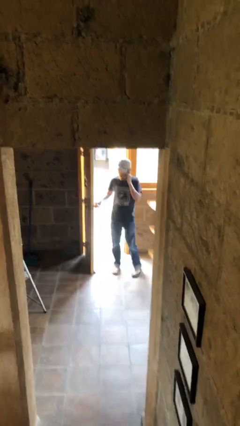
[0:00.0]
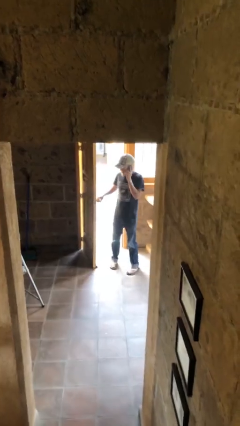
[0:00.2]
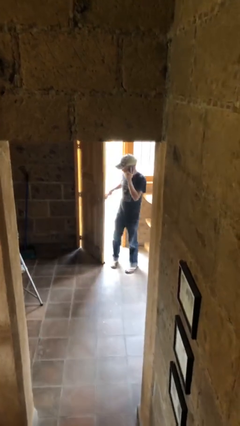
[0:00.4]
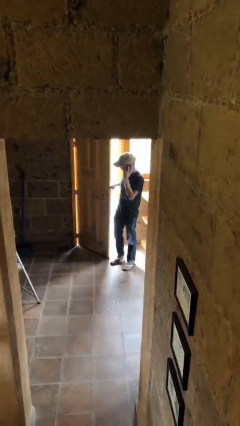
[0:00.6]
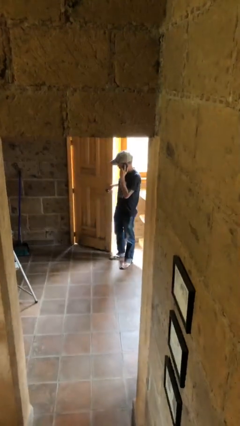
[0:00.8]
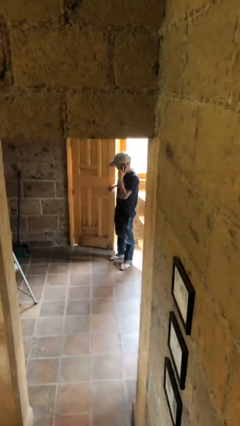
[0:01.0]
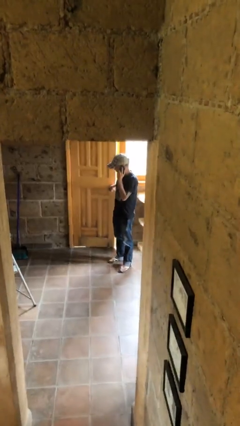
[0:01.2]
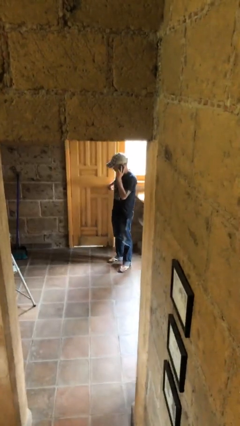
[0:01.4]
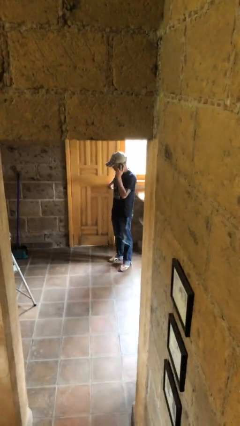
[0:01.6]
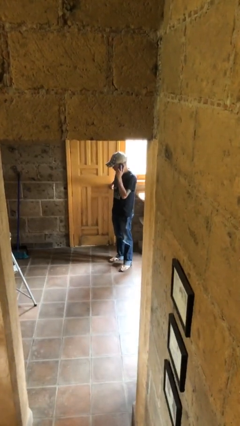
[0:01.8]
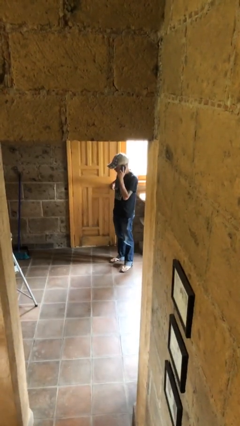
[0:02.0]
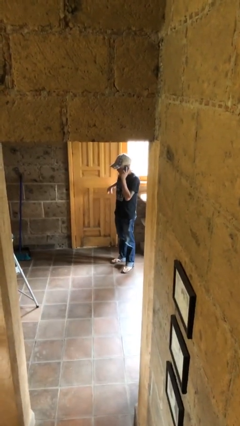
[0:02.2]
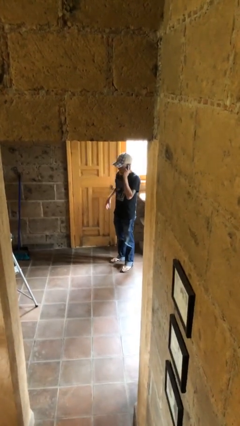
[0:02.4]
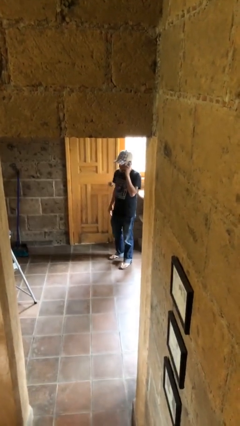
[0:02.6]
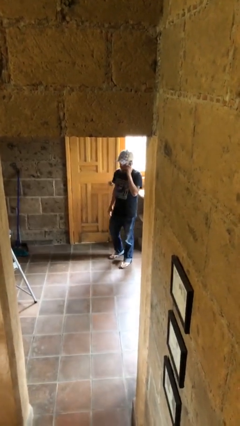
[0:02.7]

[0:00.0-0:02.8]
person closes facility door

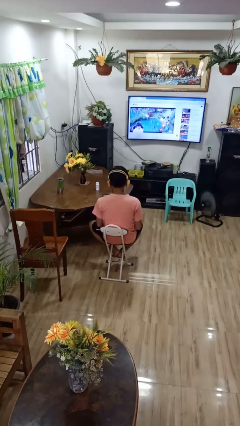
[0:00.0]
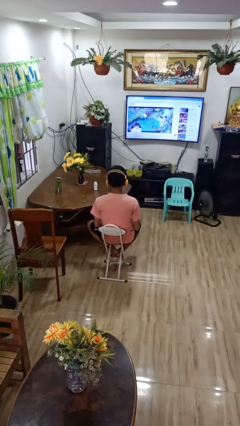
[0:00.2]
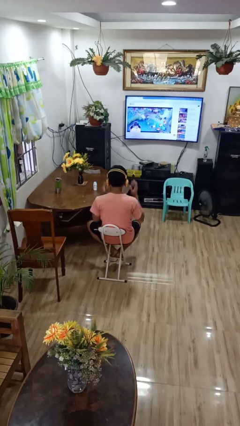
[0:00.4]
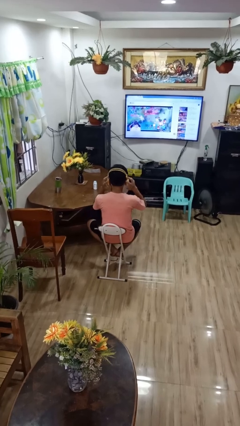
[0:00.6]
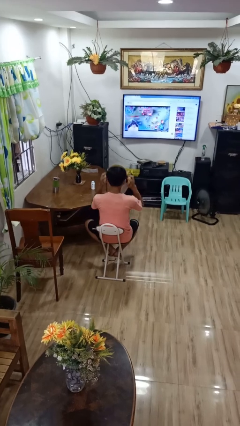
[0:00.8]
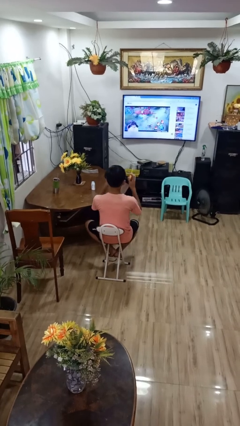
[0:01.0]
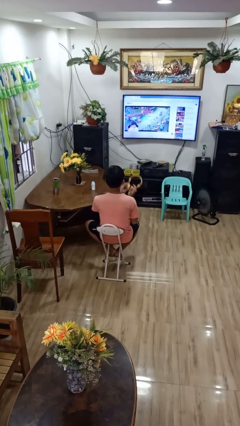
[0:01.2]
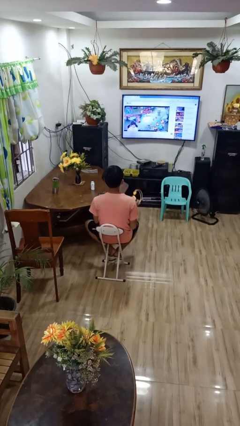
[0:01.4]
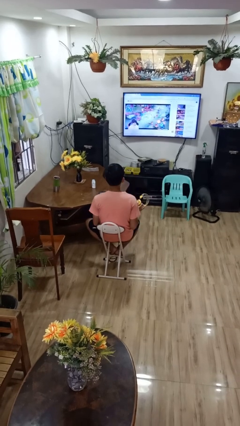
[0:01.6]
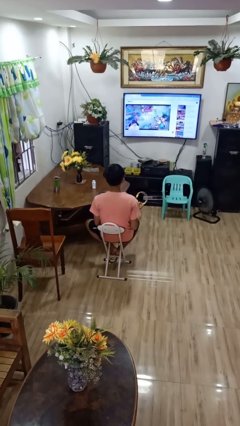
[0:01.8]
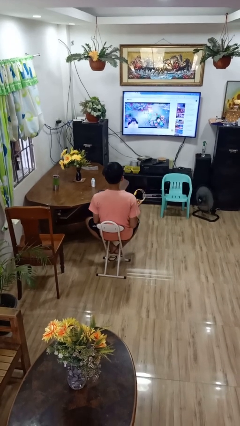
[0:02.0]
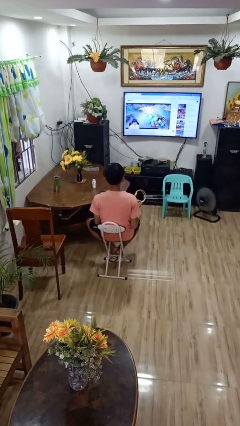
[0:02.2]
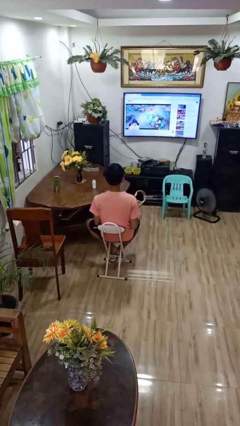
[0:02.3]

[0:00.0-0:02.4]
person takes off headphones

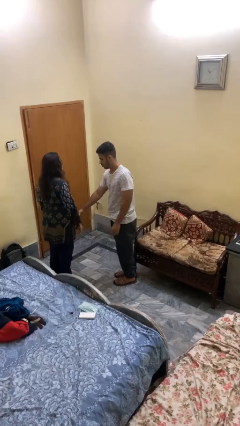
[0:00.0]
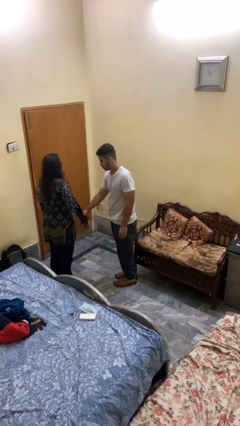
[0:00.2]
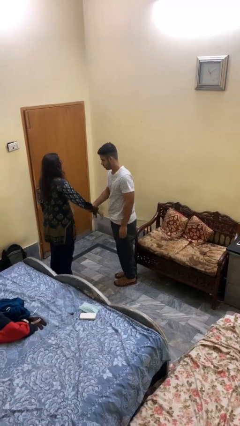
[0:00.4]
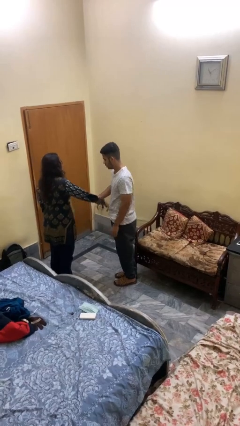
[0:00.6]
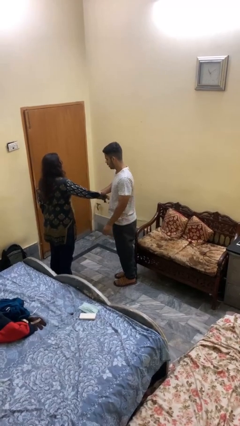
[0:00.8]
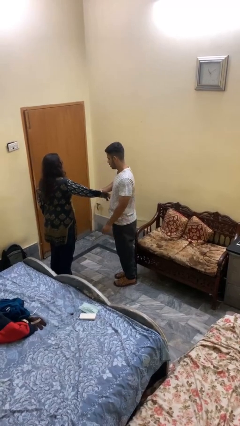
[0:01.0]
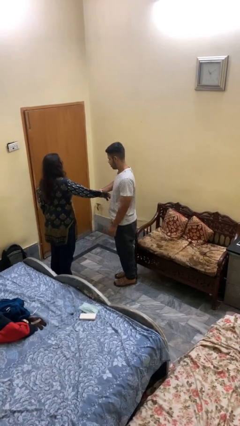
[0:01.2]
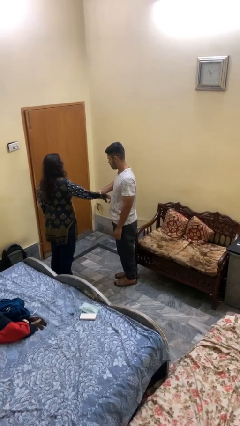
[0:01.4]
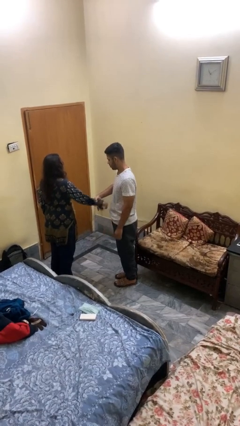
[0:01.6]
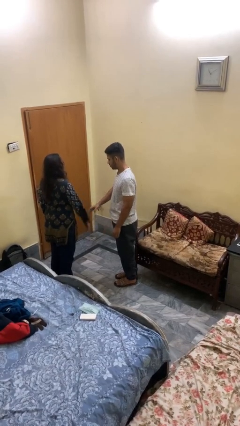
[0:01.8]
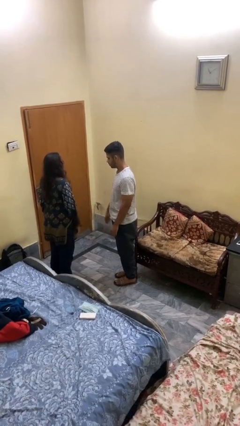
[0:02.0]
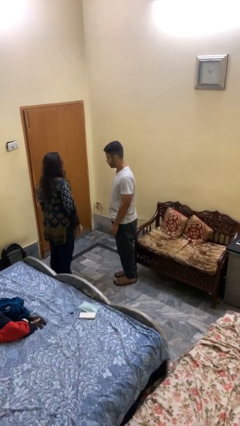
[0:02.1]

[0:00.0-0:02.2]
person grabs person by forearm

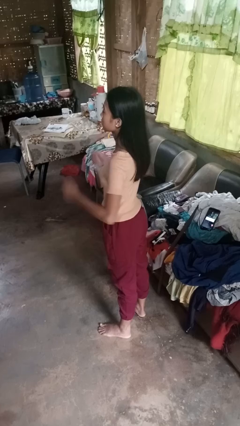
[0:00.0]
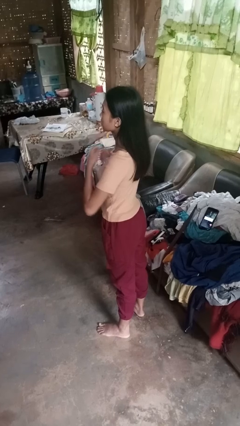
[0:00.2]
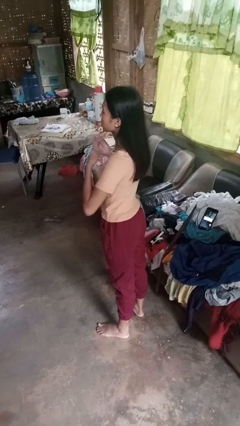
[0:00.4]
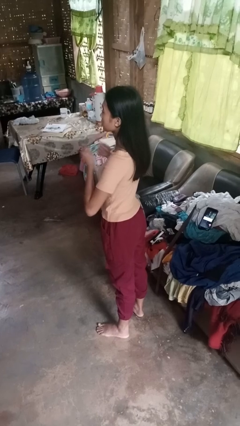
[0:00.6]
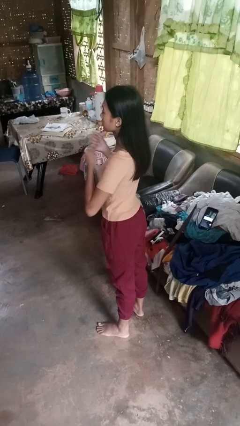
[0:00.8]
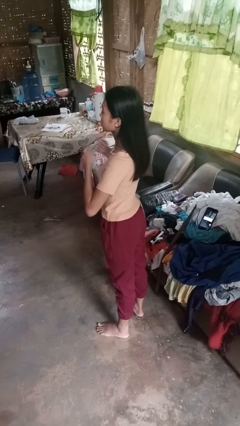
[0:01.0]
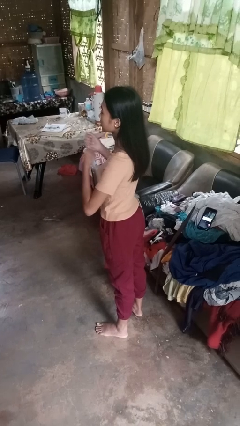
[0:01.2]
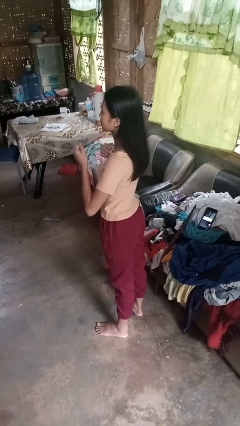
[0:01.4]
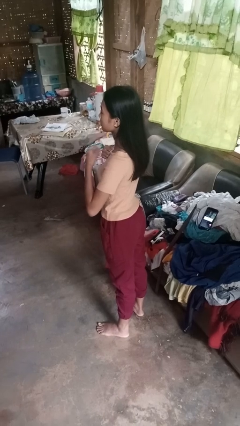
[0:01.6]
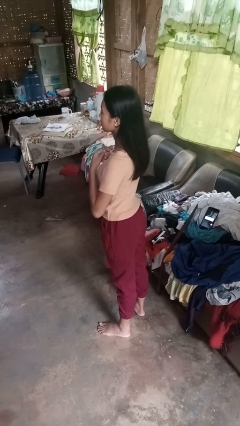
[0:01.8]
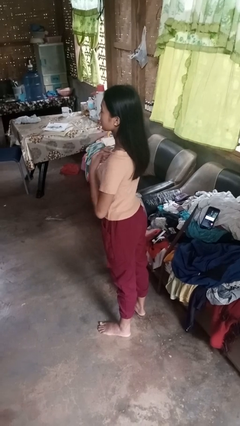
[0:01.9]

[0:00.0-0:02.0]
person drums on chest

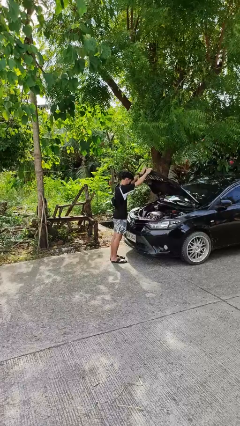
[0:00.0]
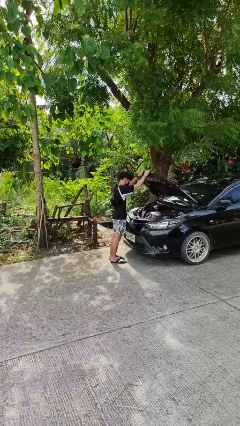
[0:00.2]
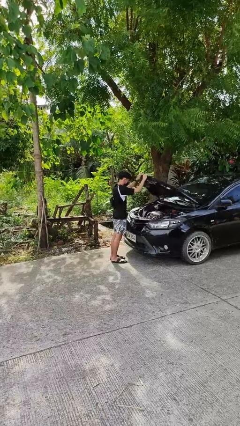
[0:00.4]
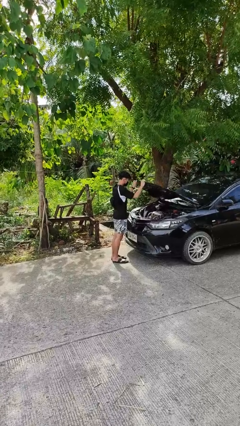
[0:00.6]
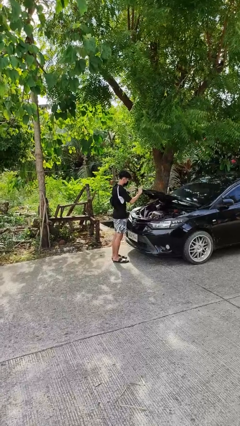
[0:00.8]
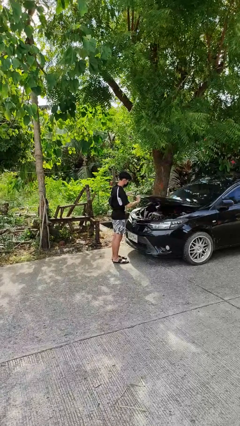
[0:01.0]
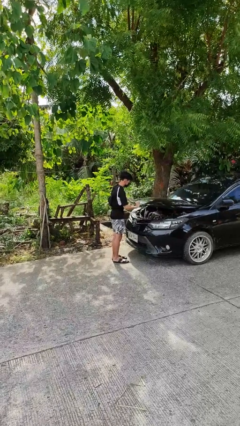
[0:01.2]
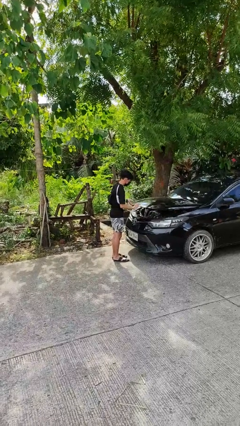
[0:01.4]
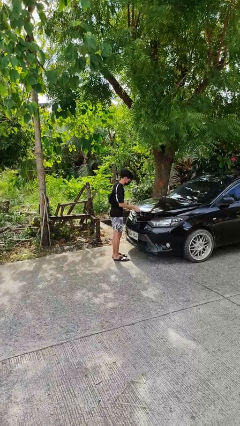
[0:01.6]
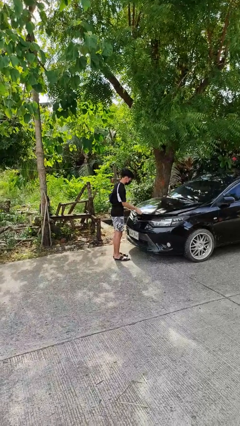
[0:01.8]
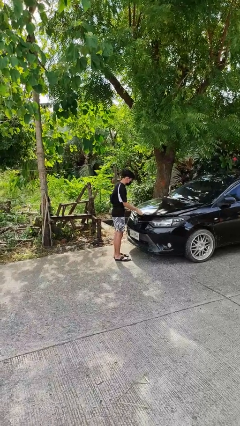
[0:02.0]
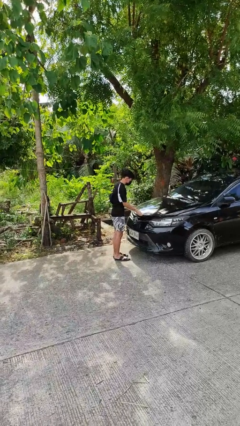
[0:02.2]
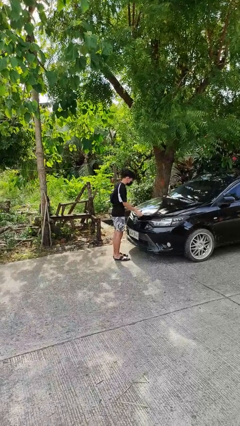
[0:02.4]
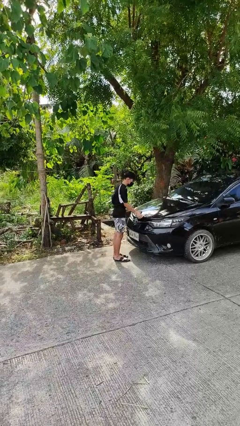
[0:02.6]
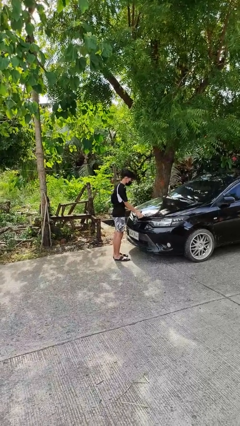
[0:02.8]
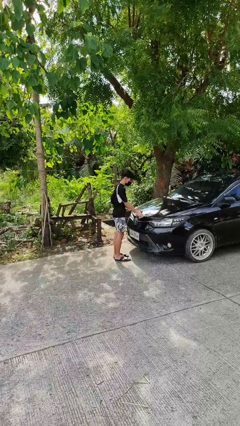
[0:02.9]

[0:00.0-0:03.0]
person closes car hood

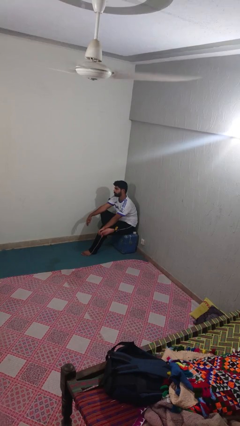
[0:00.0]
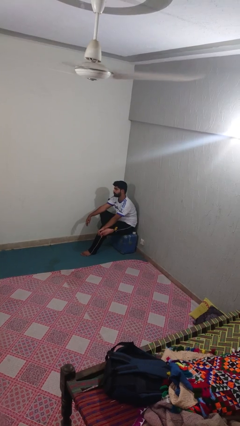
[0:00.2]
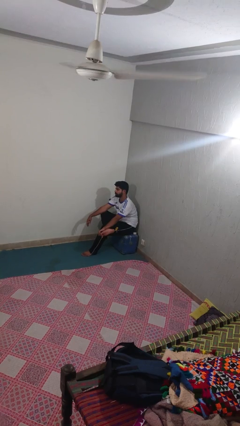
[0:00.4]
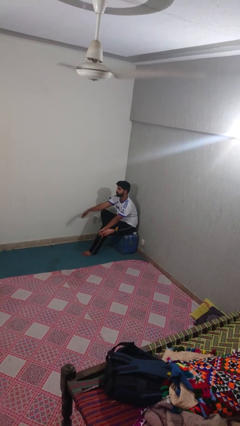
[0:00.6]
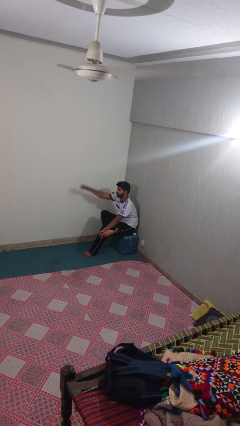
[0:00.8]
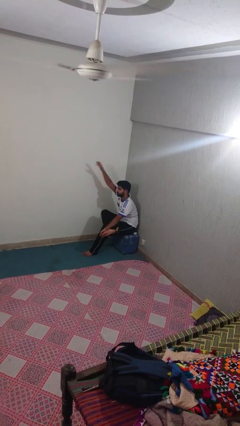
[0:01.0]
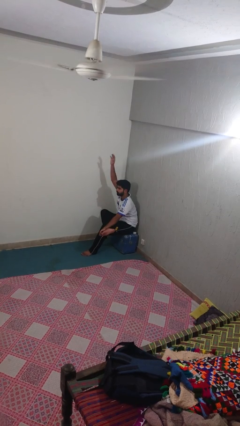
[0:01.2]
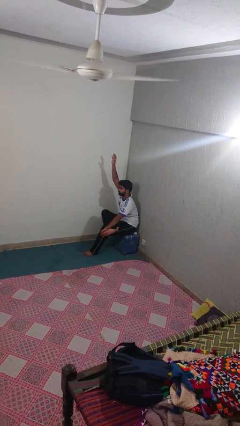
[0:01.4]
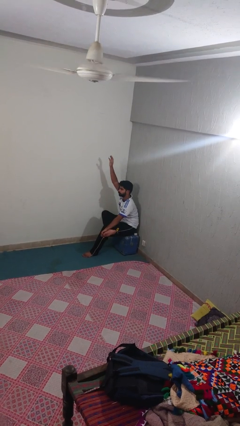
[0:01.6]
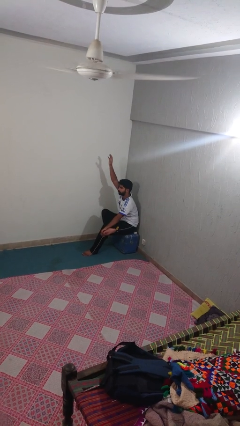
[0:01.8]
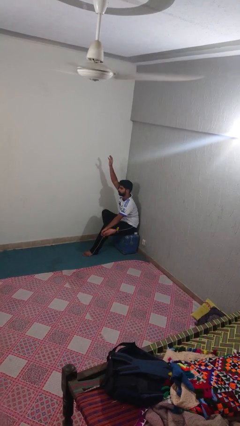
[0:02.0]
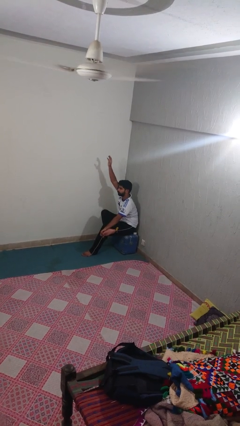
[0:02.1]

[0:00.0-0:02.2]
person gestures raise hand

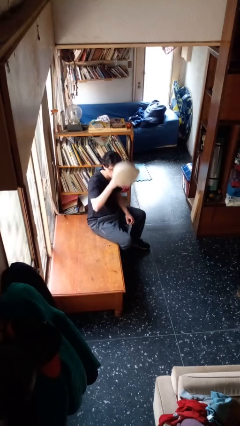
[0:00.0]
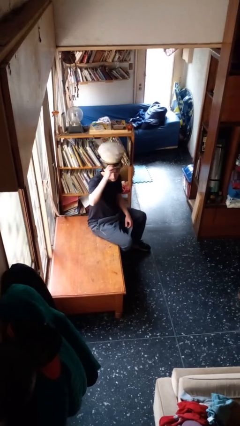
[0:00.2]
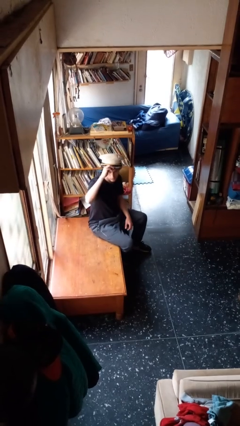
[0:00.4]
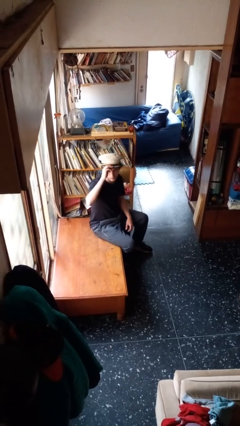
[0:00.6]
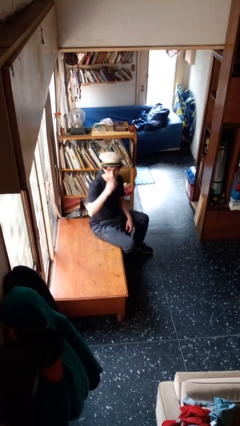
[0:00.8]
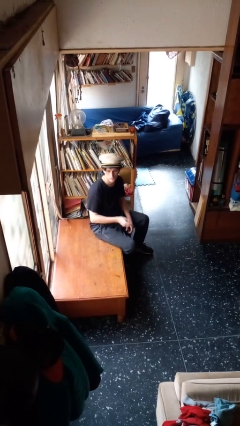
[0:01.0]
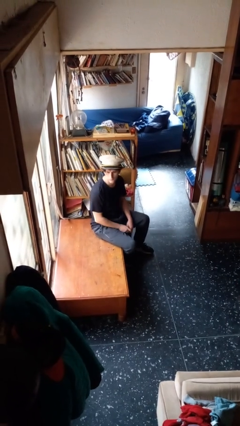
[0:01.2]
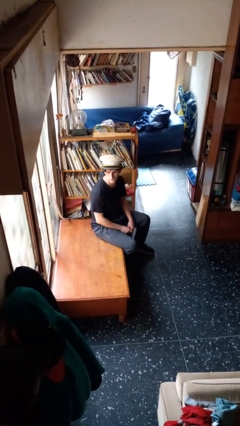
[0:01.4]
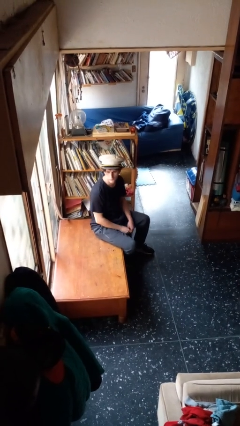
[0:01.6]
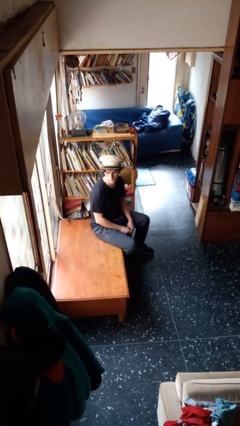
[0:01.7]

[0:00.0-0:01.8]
person puts on hat

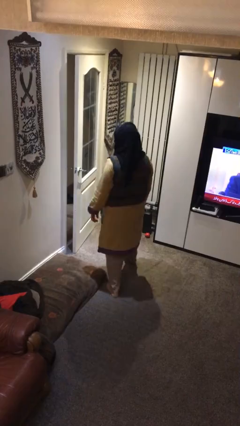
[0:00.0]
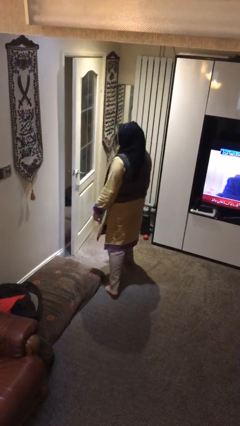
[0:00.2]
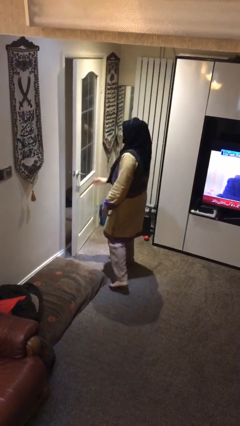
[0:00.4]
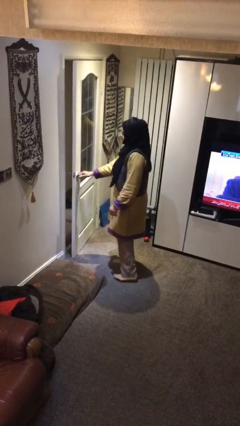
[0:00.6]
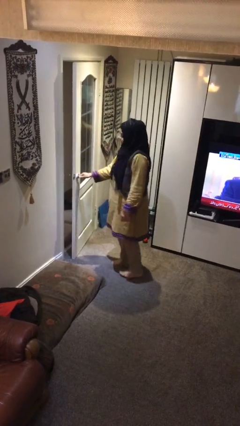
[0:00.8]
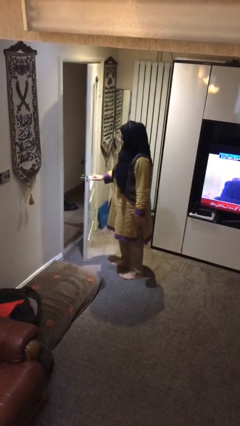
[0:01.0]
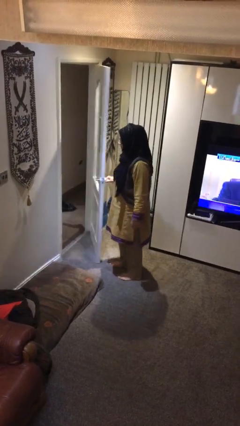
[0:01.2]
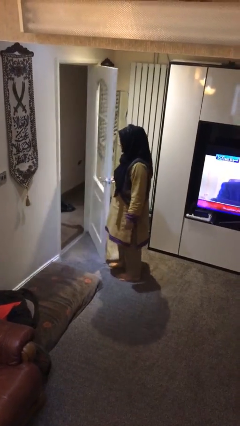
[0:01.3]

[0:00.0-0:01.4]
person opens facility door
